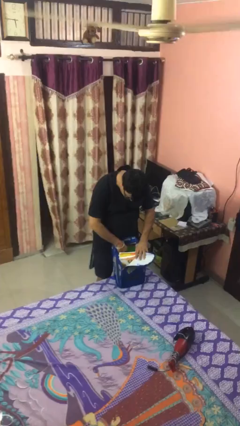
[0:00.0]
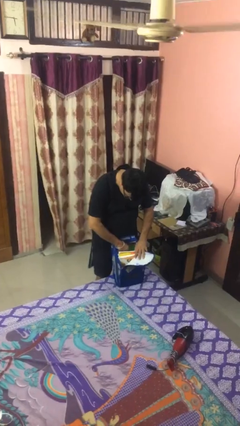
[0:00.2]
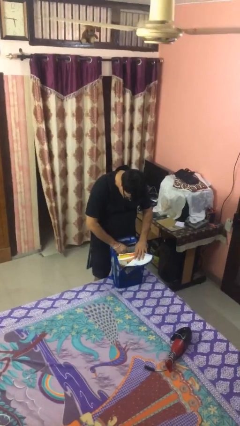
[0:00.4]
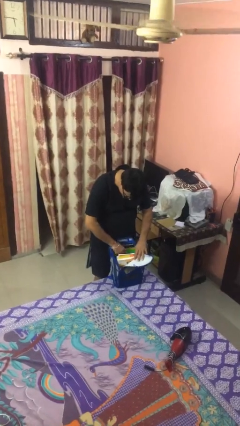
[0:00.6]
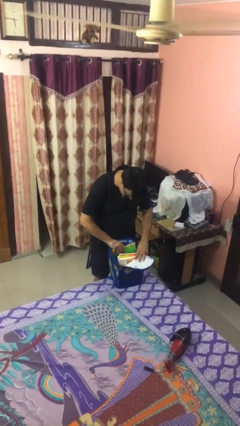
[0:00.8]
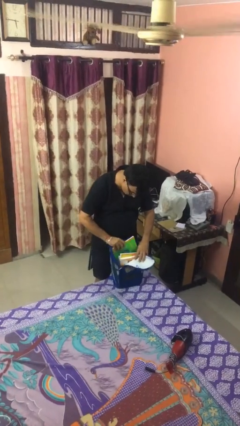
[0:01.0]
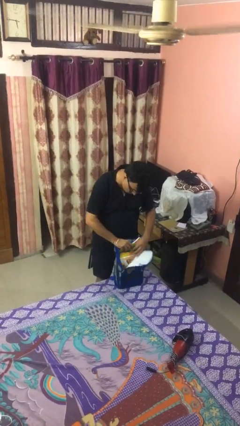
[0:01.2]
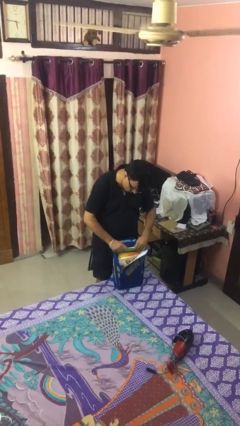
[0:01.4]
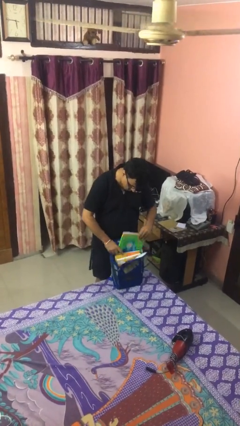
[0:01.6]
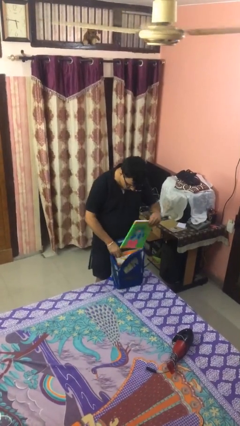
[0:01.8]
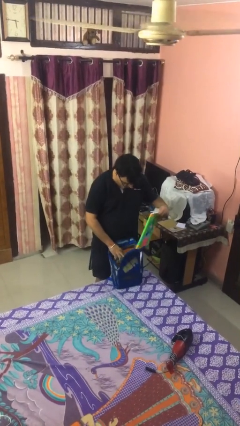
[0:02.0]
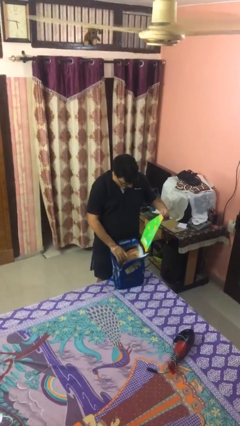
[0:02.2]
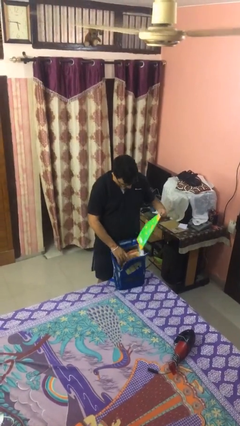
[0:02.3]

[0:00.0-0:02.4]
person takes object from backpack

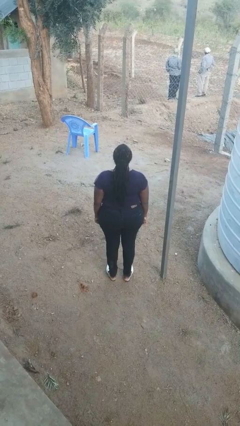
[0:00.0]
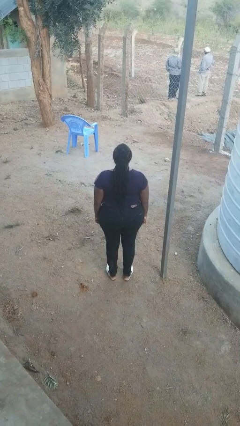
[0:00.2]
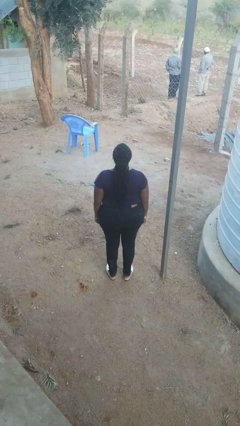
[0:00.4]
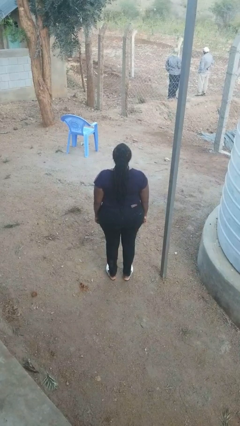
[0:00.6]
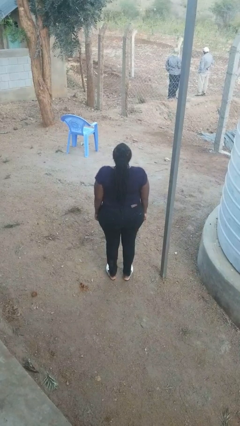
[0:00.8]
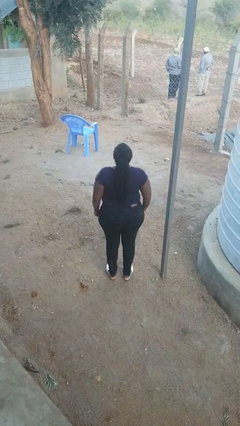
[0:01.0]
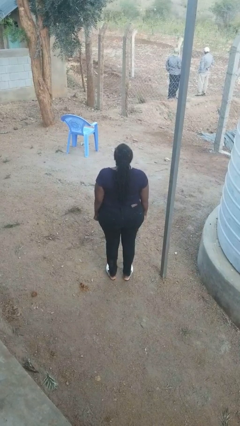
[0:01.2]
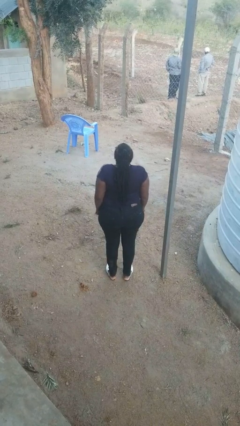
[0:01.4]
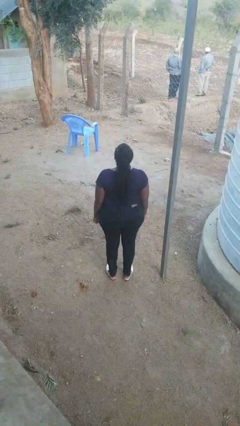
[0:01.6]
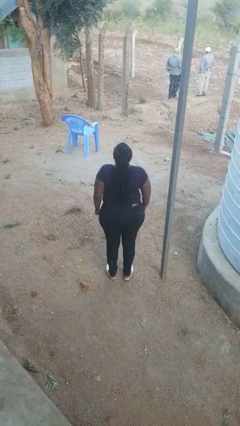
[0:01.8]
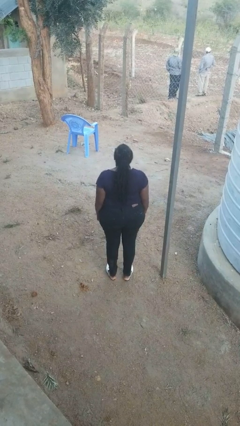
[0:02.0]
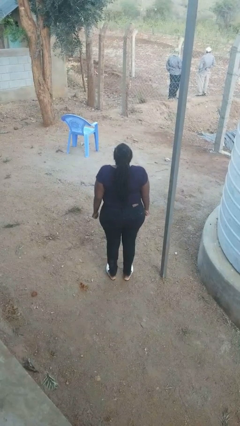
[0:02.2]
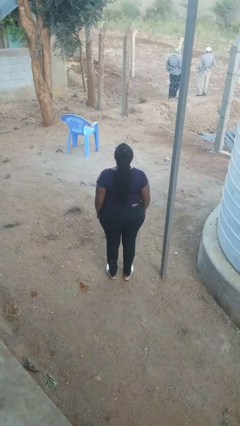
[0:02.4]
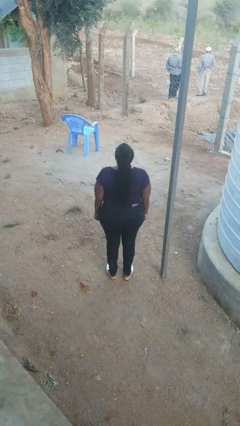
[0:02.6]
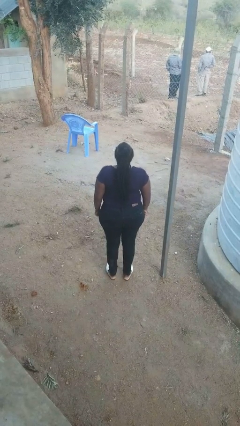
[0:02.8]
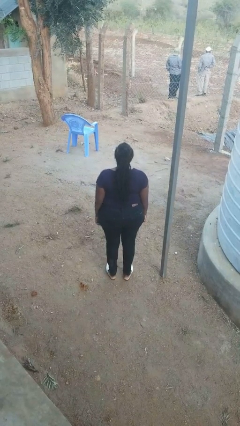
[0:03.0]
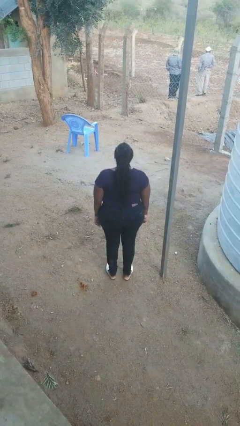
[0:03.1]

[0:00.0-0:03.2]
person shrugs

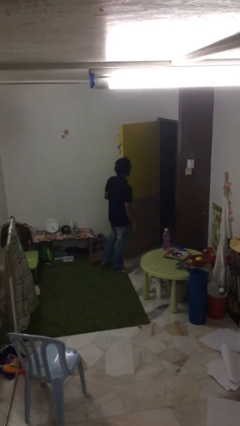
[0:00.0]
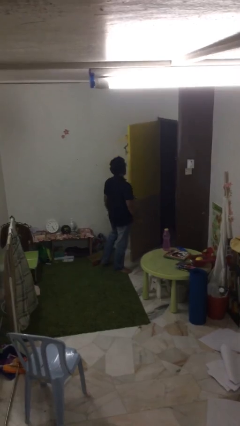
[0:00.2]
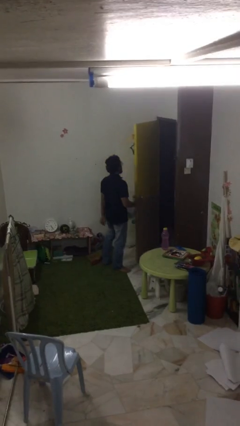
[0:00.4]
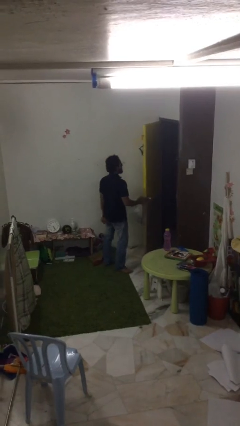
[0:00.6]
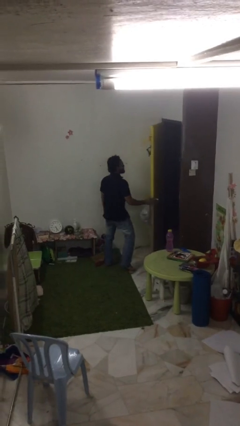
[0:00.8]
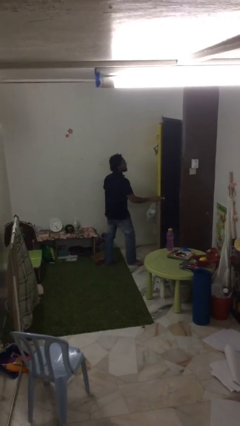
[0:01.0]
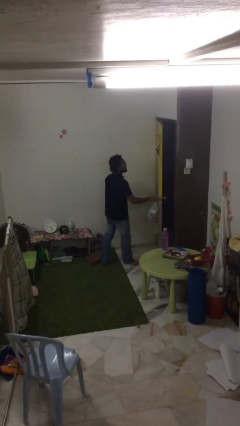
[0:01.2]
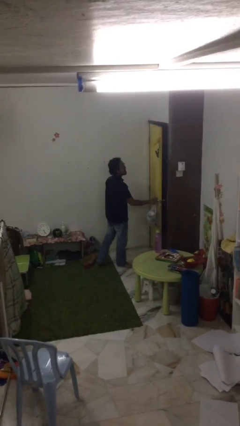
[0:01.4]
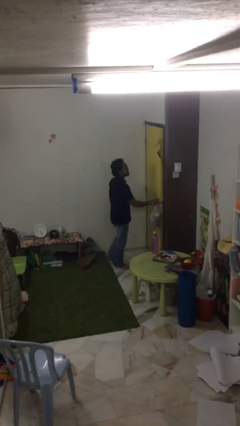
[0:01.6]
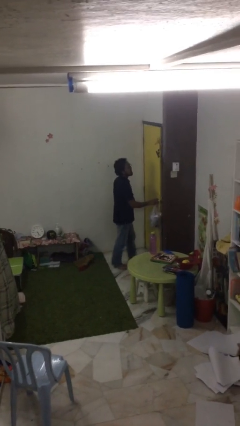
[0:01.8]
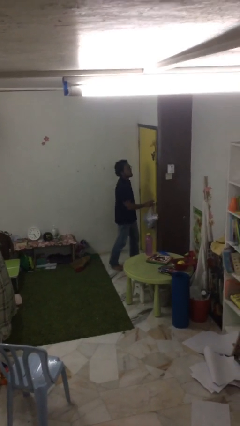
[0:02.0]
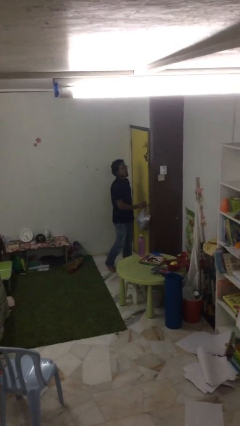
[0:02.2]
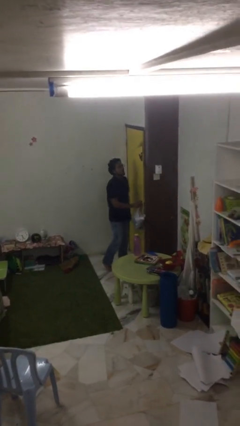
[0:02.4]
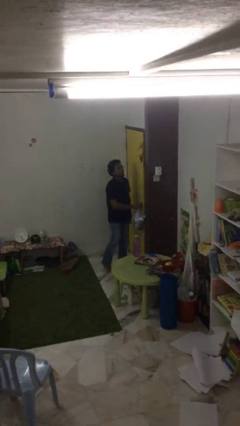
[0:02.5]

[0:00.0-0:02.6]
person closes facility door

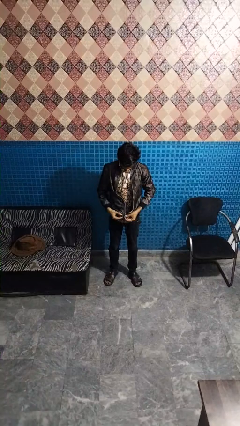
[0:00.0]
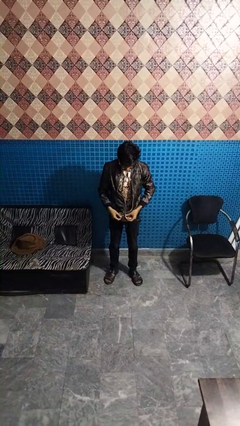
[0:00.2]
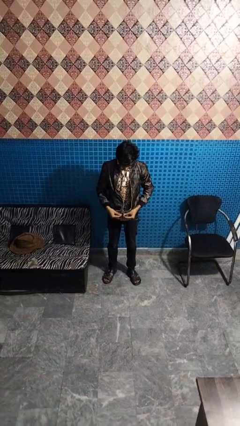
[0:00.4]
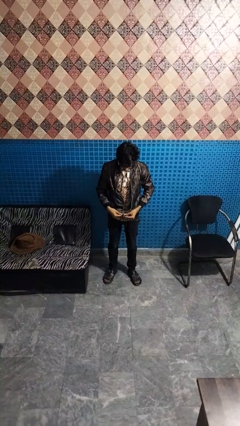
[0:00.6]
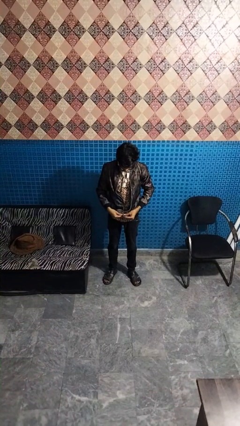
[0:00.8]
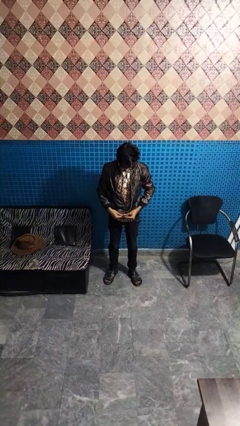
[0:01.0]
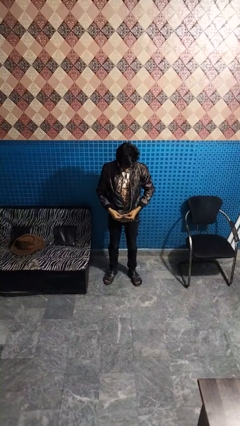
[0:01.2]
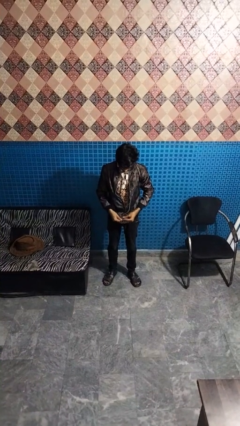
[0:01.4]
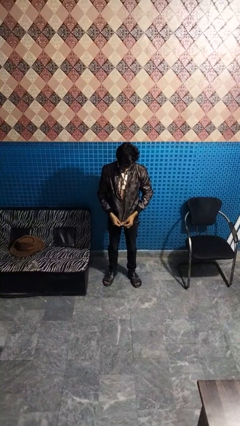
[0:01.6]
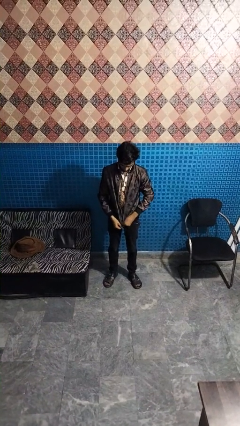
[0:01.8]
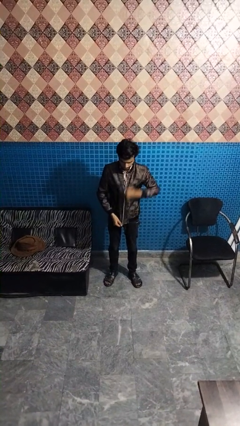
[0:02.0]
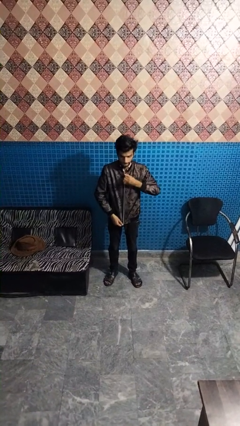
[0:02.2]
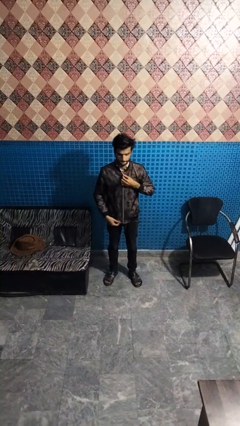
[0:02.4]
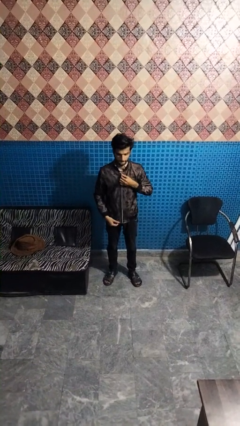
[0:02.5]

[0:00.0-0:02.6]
person zips up jacket

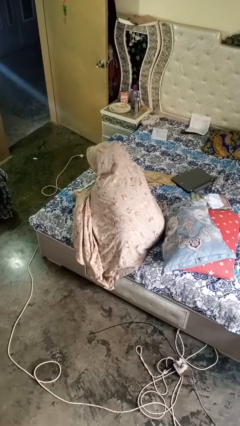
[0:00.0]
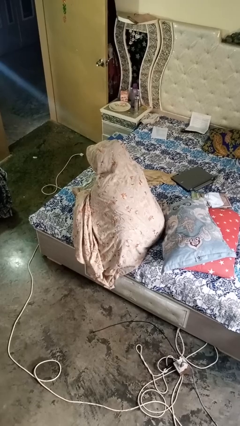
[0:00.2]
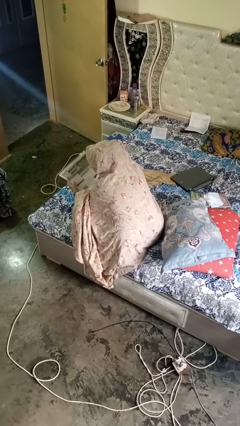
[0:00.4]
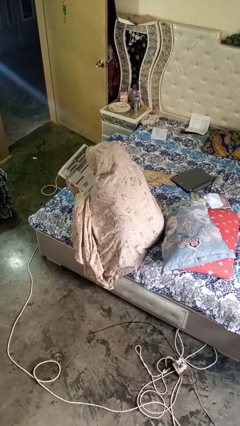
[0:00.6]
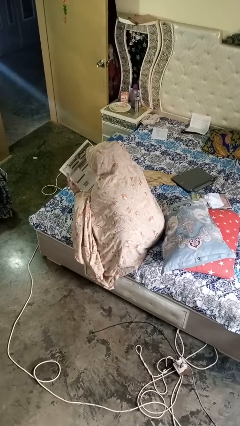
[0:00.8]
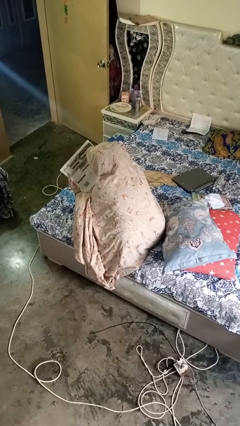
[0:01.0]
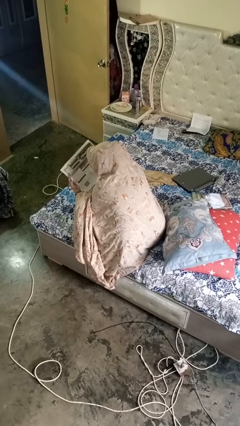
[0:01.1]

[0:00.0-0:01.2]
person reads newspaper

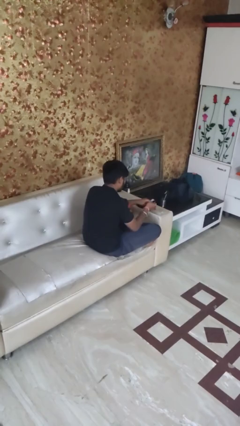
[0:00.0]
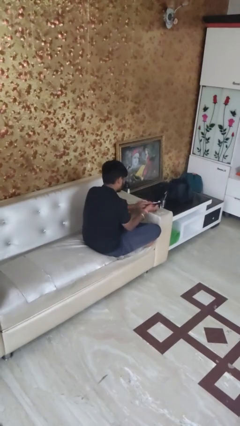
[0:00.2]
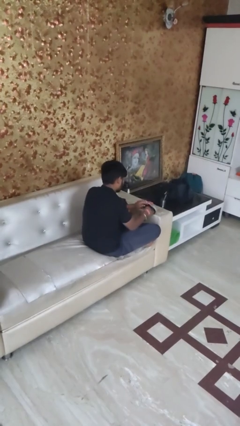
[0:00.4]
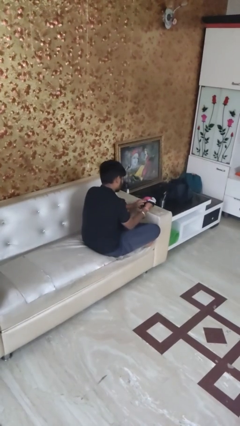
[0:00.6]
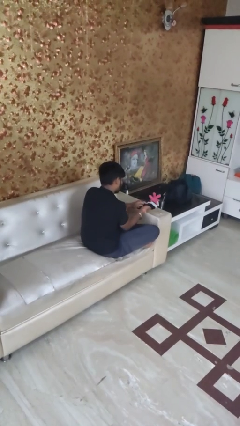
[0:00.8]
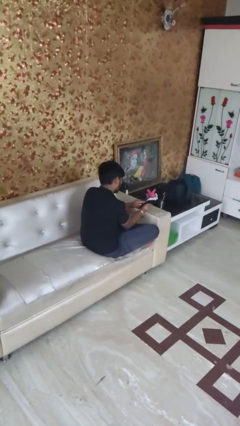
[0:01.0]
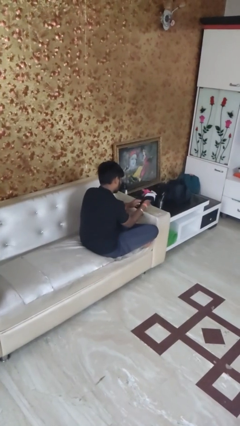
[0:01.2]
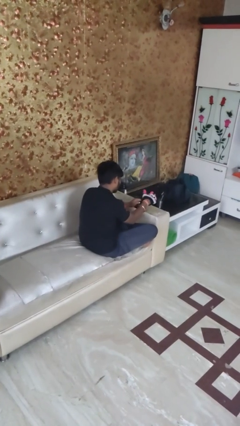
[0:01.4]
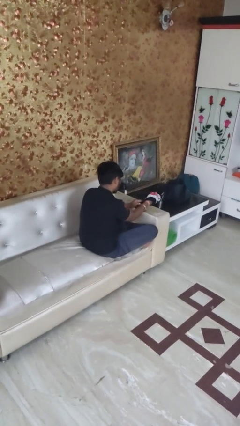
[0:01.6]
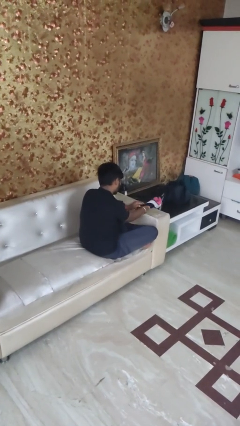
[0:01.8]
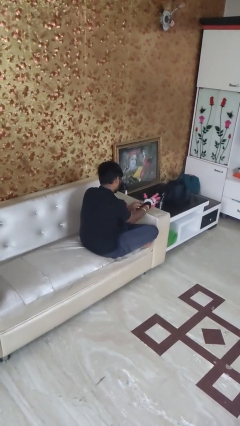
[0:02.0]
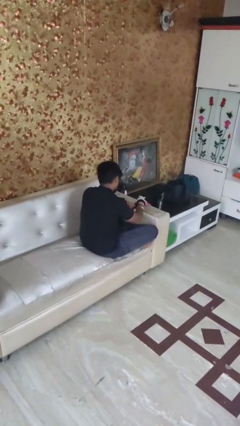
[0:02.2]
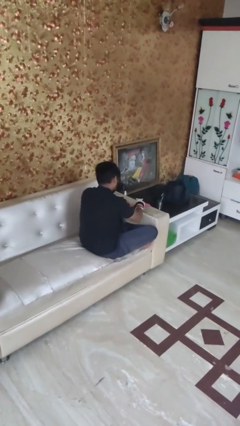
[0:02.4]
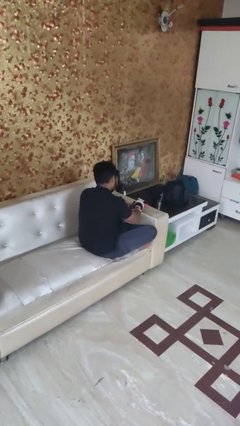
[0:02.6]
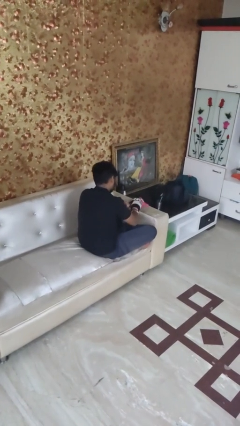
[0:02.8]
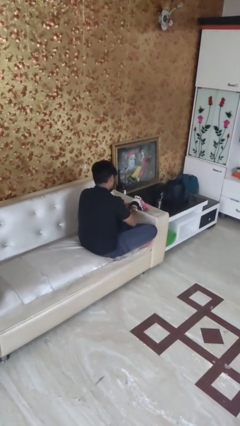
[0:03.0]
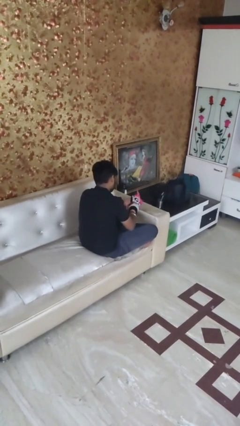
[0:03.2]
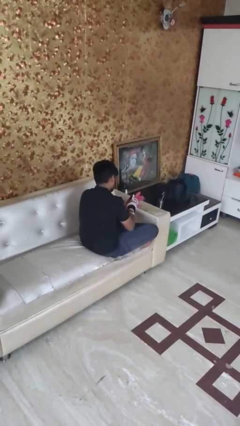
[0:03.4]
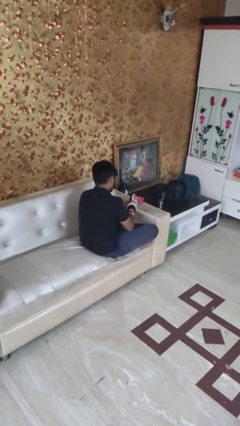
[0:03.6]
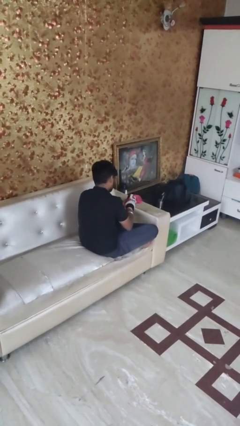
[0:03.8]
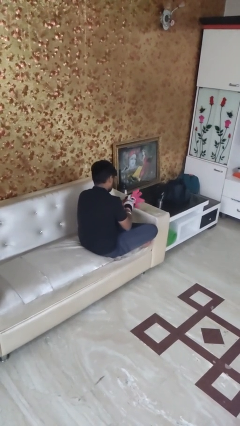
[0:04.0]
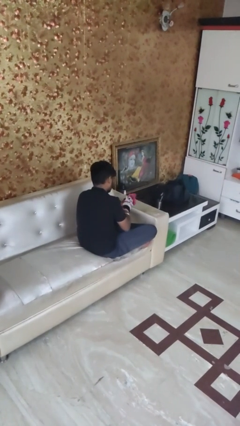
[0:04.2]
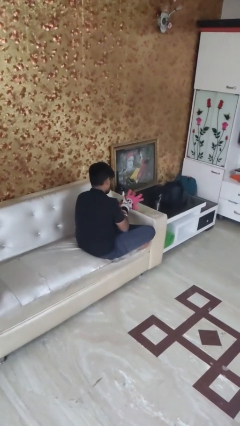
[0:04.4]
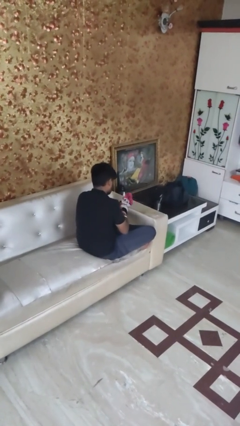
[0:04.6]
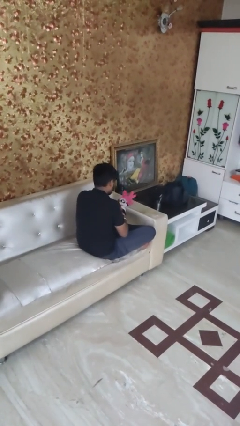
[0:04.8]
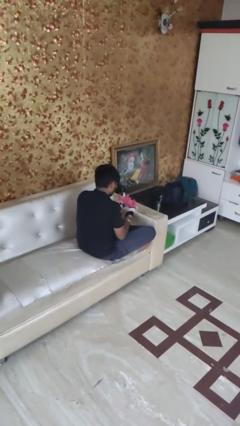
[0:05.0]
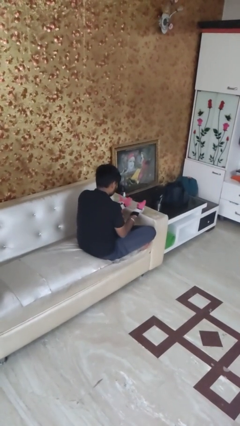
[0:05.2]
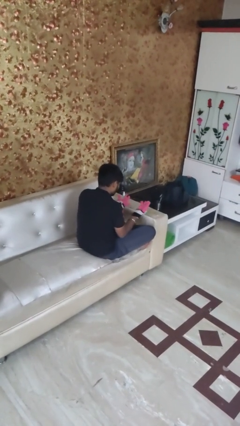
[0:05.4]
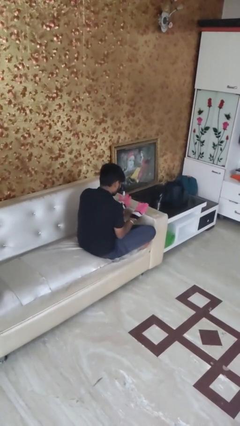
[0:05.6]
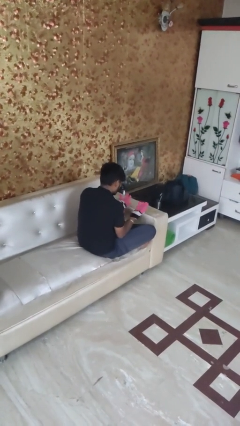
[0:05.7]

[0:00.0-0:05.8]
person puts on gloves
